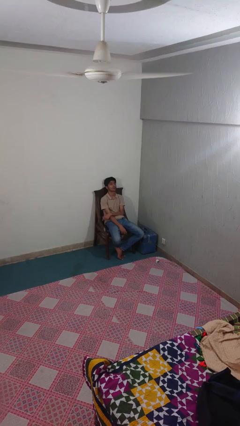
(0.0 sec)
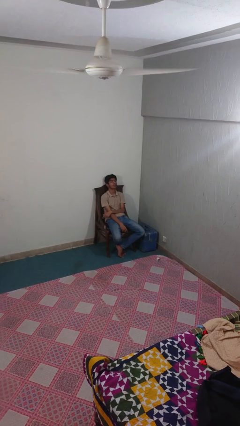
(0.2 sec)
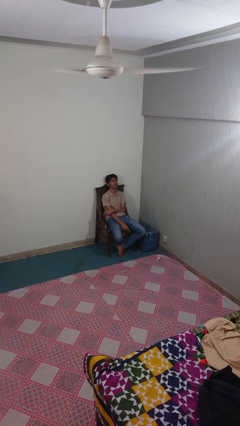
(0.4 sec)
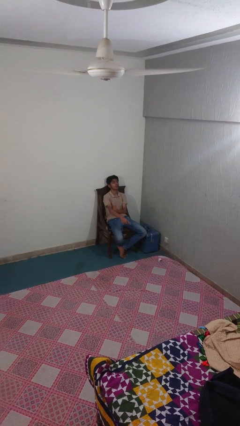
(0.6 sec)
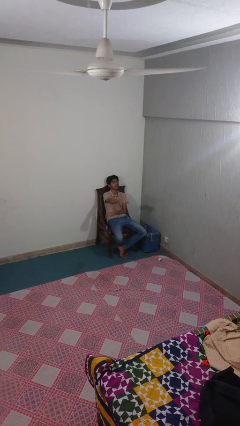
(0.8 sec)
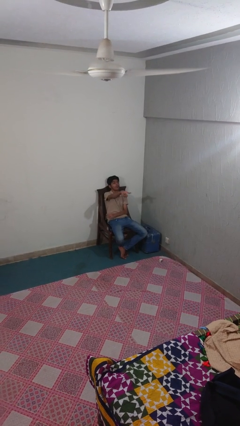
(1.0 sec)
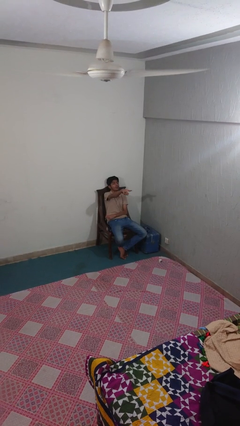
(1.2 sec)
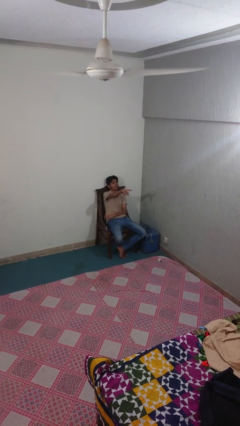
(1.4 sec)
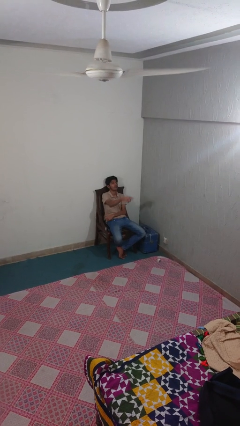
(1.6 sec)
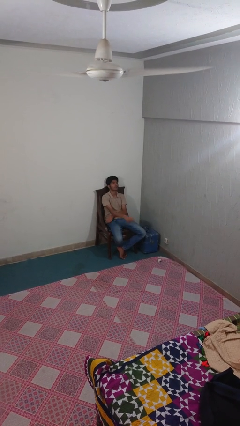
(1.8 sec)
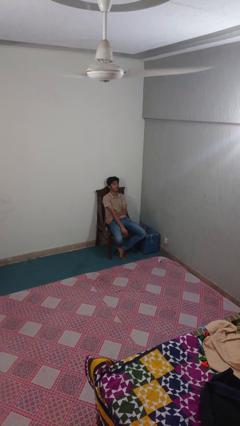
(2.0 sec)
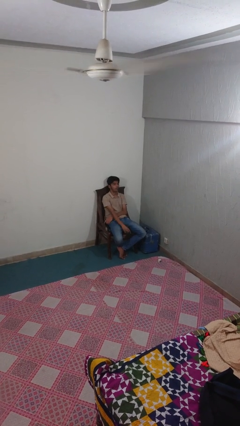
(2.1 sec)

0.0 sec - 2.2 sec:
person points at person

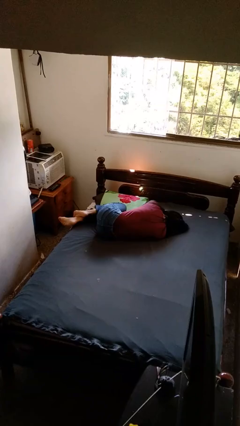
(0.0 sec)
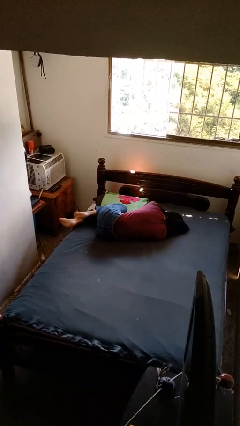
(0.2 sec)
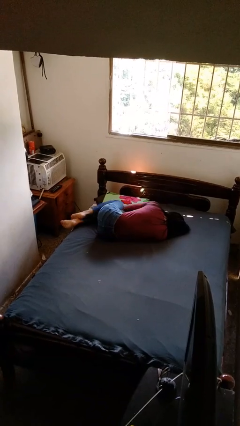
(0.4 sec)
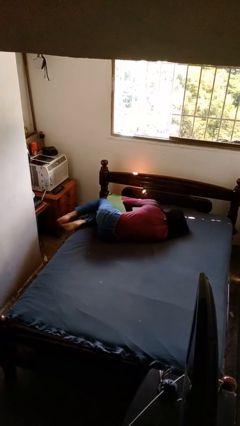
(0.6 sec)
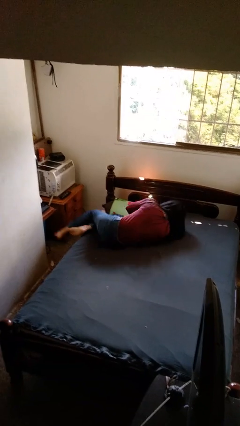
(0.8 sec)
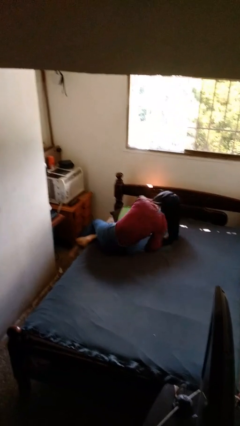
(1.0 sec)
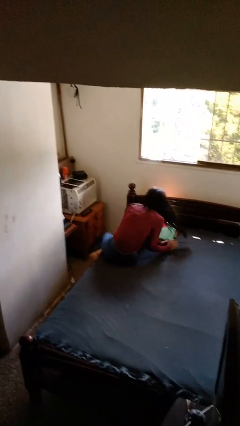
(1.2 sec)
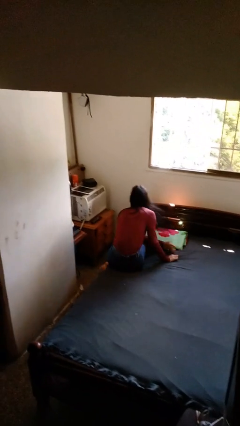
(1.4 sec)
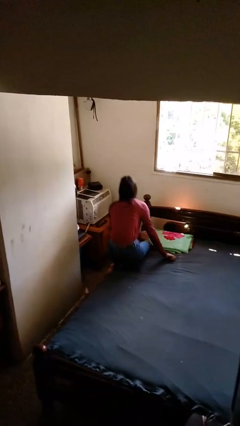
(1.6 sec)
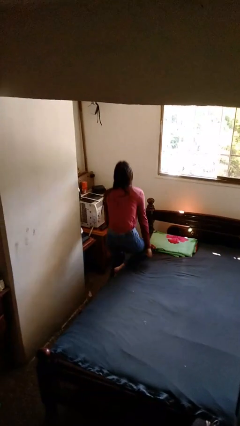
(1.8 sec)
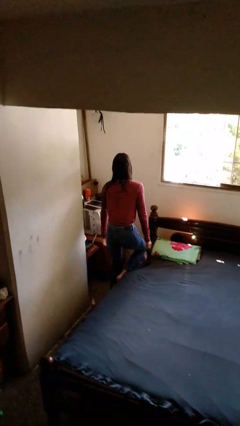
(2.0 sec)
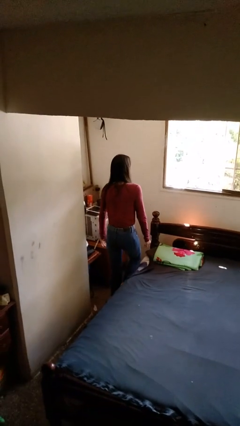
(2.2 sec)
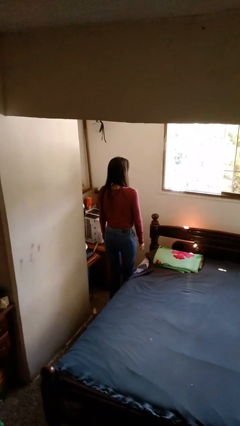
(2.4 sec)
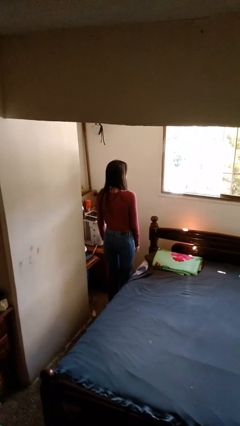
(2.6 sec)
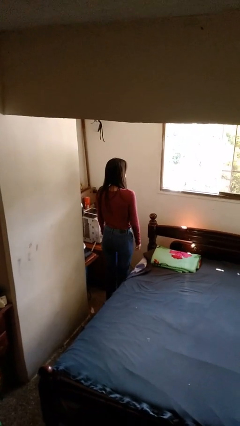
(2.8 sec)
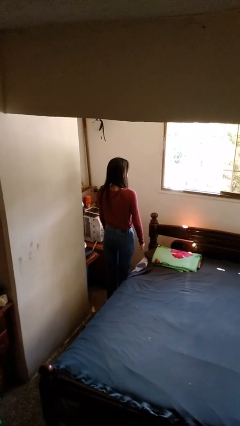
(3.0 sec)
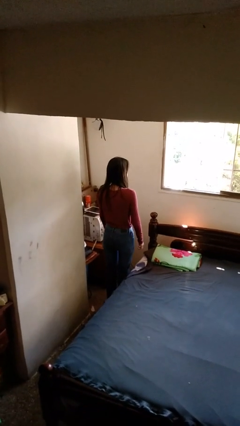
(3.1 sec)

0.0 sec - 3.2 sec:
person stands up

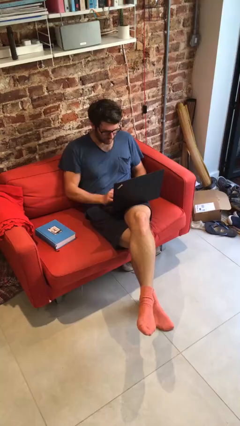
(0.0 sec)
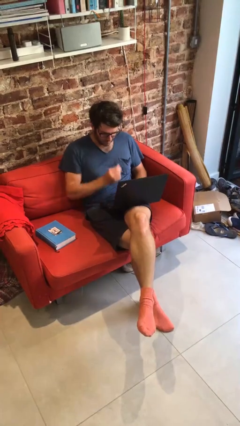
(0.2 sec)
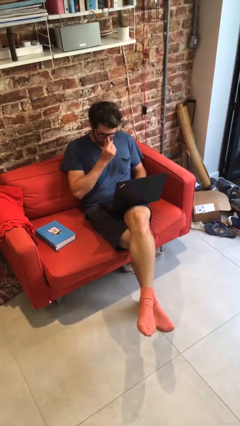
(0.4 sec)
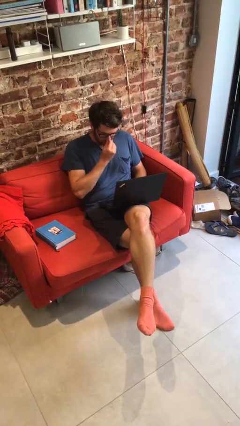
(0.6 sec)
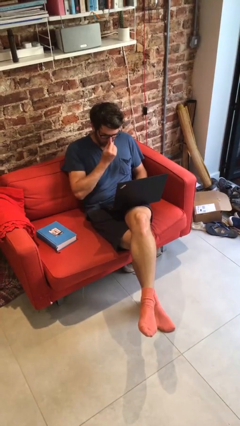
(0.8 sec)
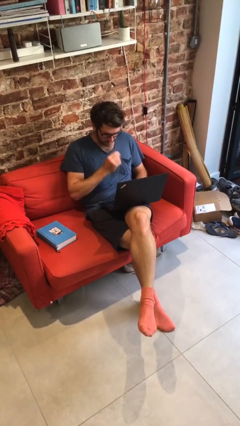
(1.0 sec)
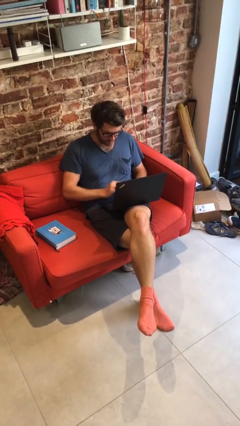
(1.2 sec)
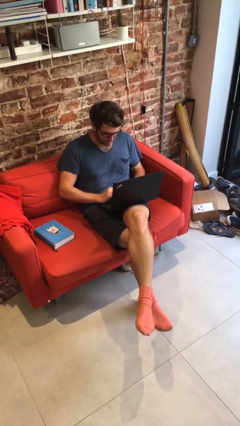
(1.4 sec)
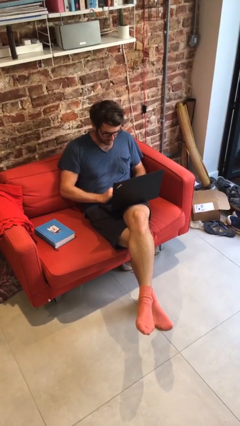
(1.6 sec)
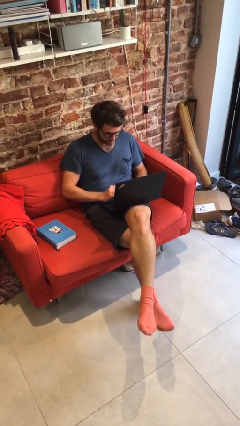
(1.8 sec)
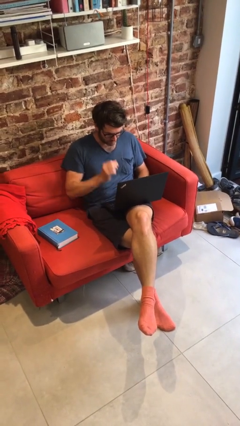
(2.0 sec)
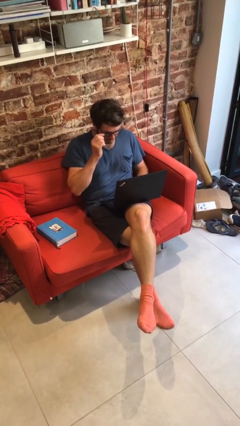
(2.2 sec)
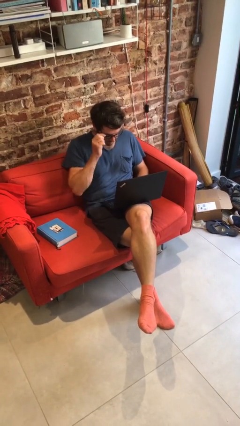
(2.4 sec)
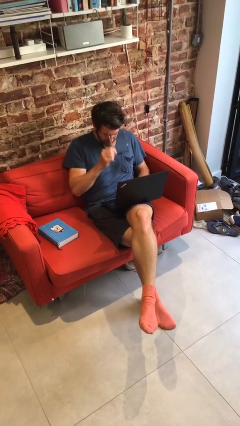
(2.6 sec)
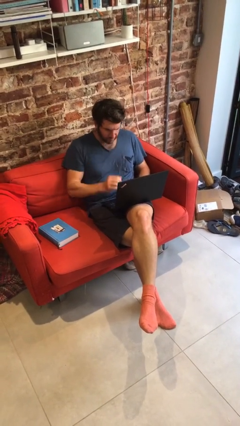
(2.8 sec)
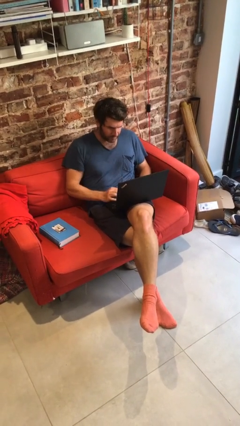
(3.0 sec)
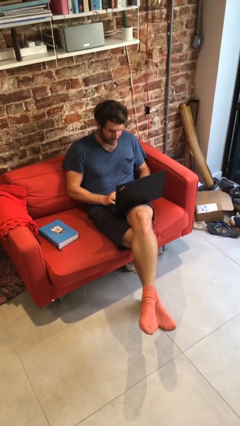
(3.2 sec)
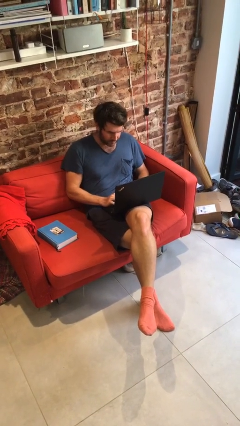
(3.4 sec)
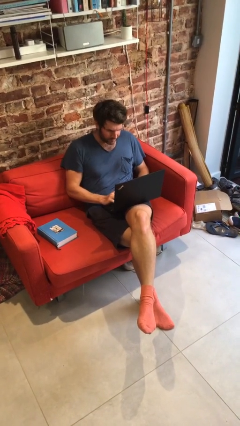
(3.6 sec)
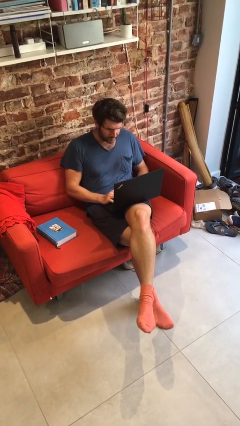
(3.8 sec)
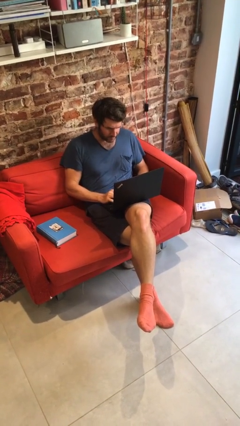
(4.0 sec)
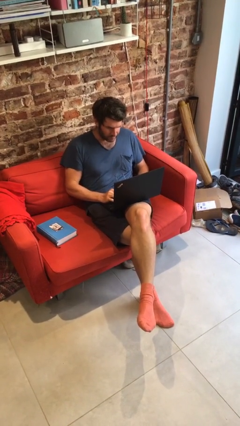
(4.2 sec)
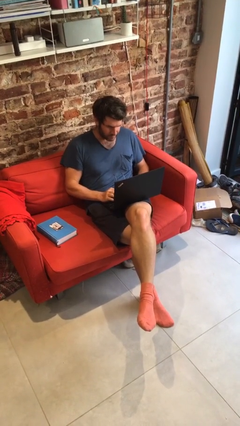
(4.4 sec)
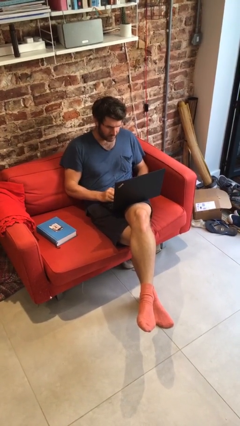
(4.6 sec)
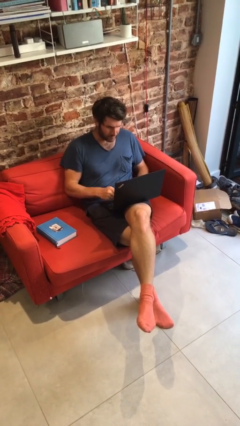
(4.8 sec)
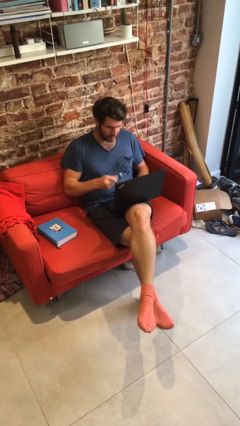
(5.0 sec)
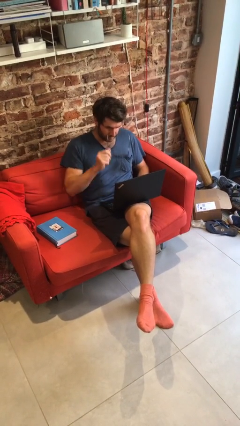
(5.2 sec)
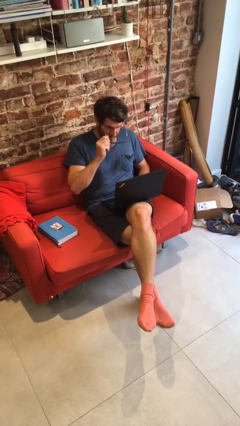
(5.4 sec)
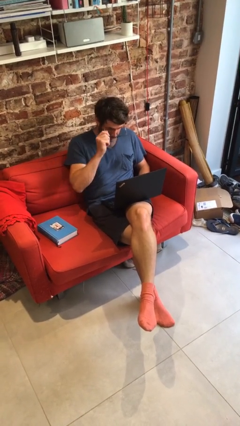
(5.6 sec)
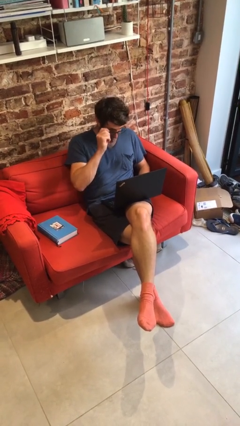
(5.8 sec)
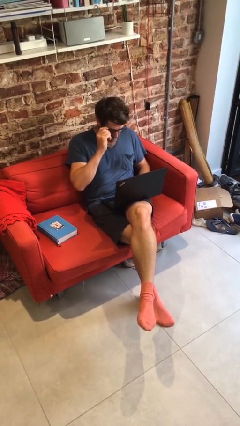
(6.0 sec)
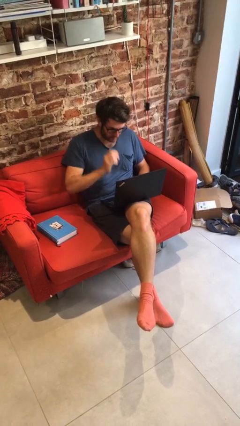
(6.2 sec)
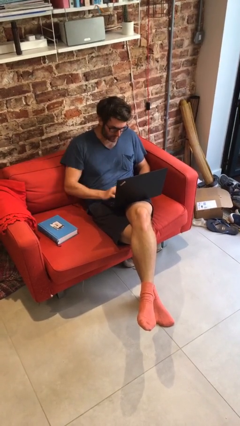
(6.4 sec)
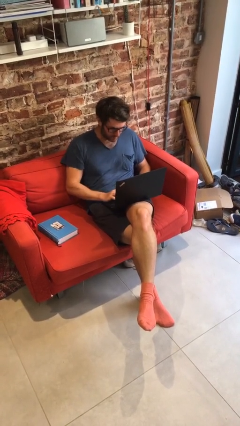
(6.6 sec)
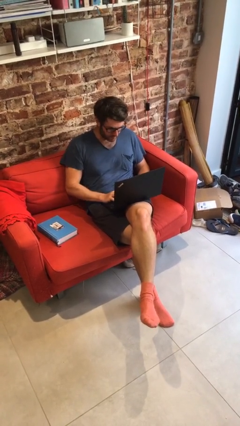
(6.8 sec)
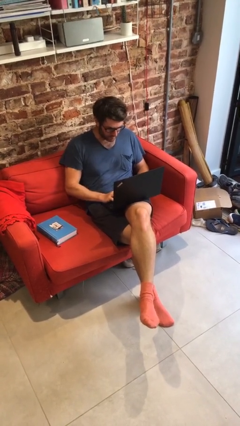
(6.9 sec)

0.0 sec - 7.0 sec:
person interacts with laptop

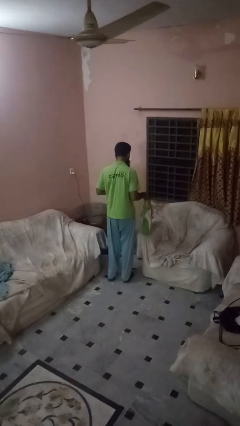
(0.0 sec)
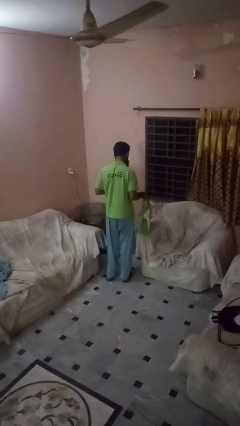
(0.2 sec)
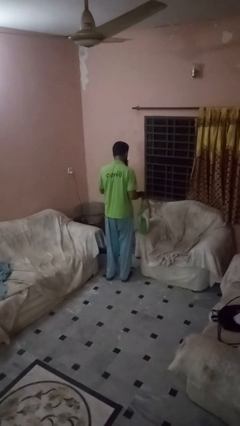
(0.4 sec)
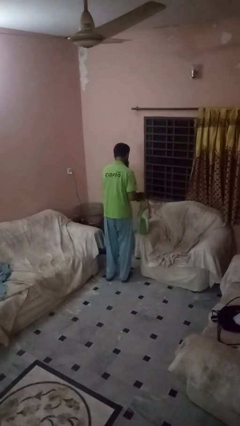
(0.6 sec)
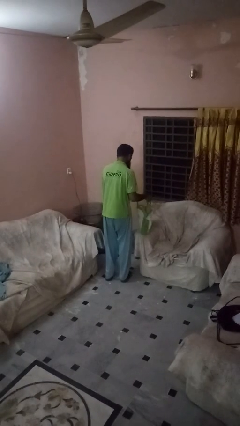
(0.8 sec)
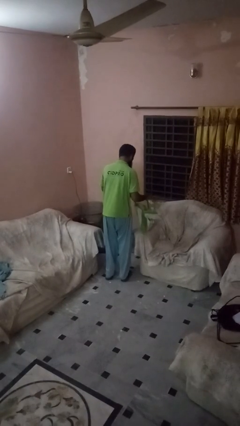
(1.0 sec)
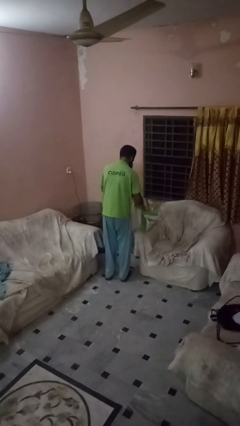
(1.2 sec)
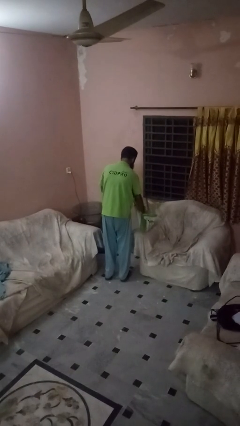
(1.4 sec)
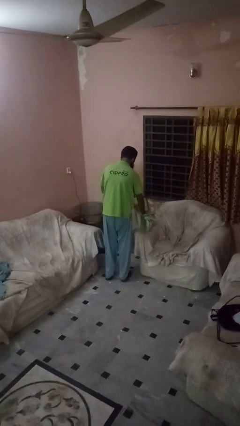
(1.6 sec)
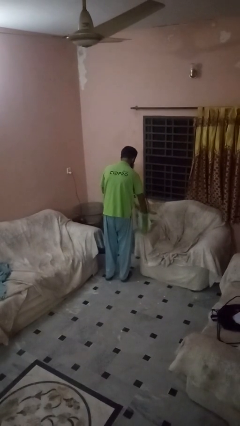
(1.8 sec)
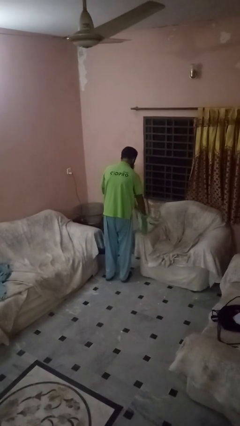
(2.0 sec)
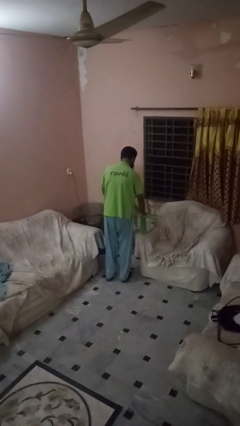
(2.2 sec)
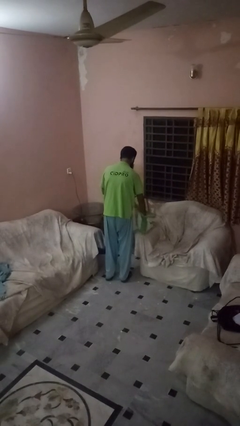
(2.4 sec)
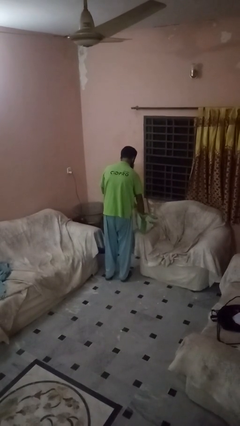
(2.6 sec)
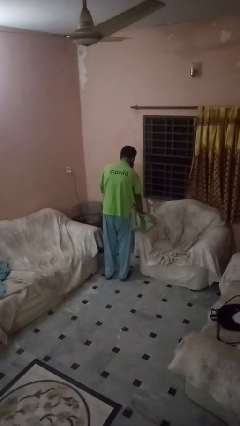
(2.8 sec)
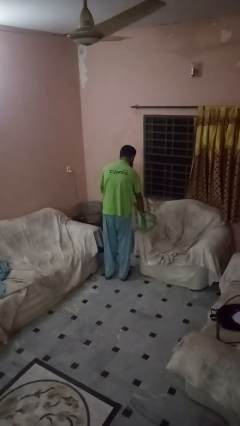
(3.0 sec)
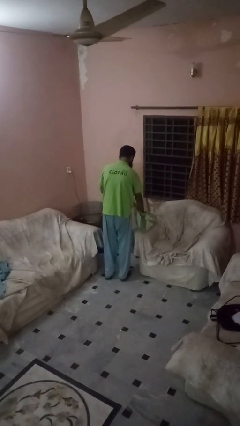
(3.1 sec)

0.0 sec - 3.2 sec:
person searches in bag

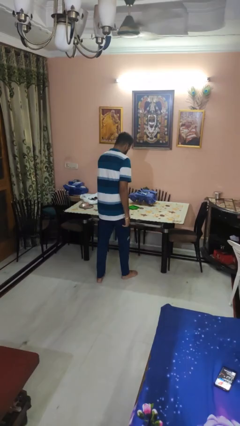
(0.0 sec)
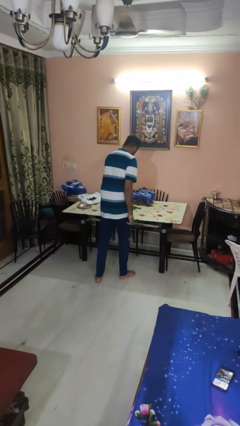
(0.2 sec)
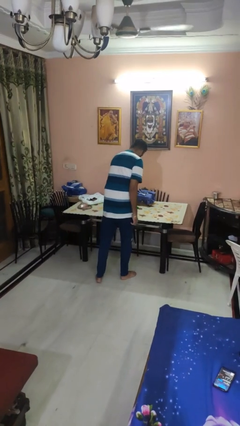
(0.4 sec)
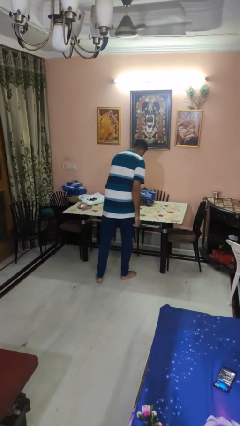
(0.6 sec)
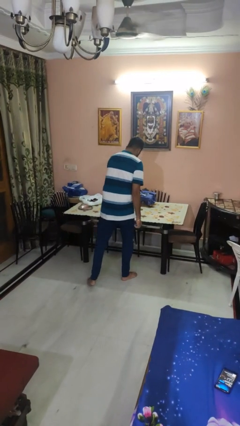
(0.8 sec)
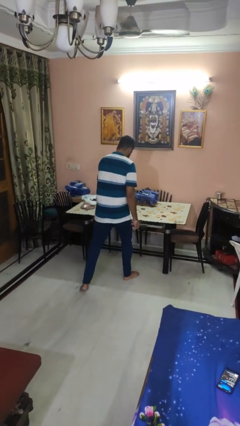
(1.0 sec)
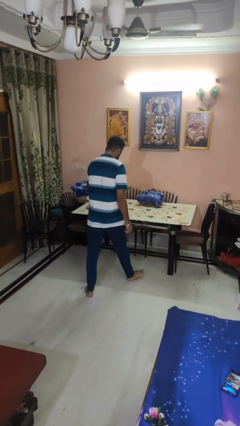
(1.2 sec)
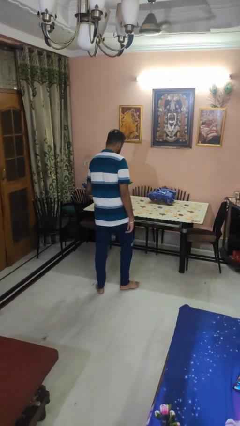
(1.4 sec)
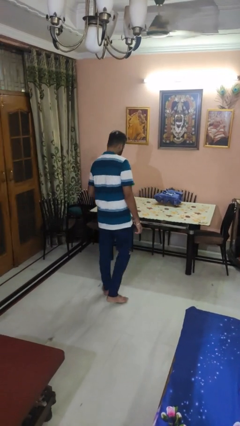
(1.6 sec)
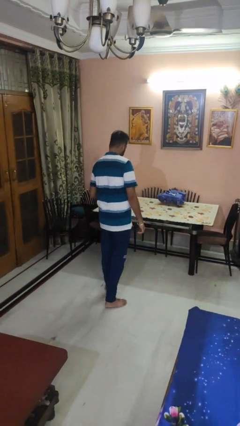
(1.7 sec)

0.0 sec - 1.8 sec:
person picks up object from table
